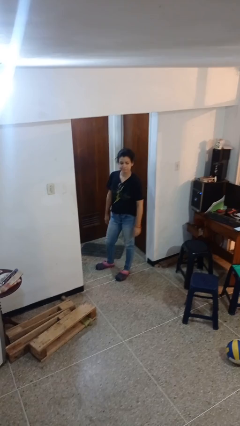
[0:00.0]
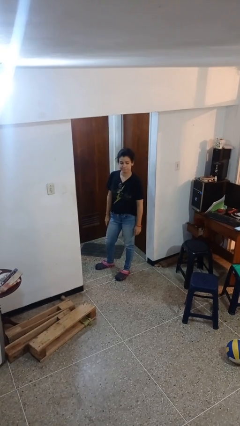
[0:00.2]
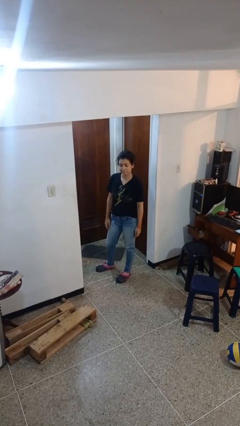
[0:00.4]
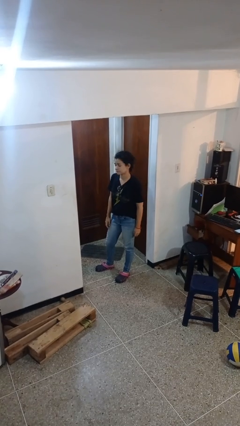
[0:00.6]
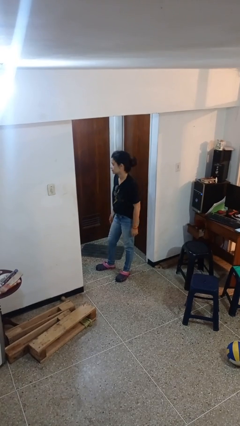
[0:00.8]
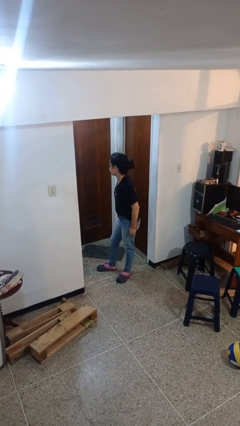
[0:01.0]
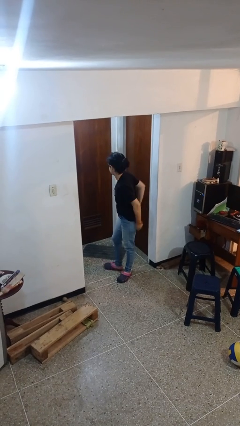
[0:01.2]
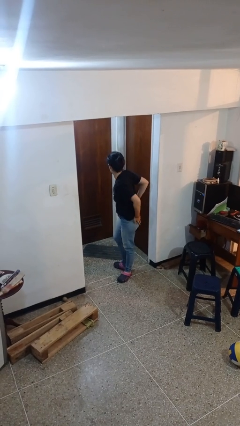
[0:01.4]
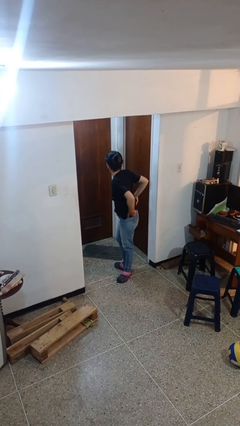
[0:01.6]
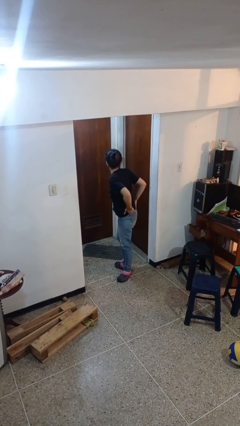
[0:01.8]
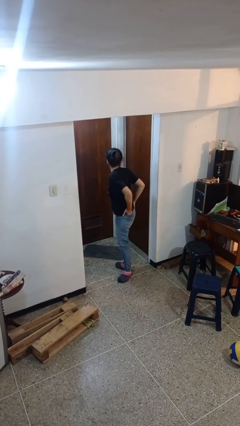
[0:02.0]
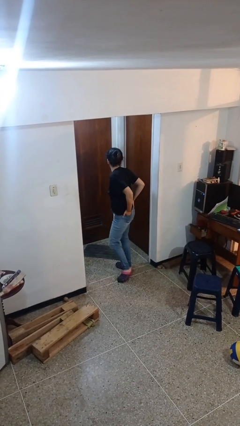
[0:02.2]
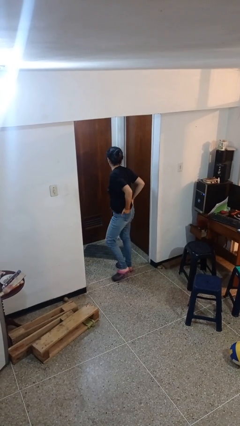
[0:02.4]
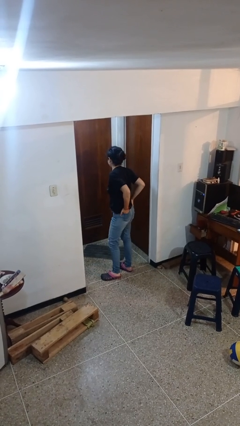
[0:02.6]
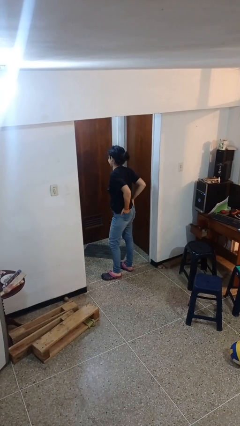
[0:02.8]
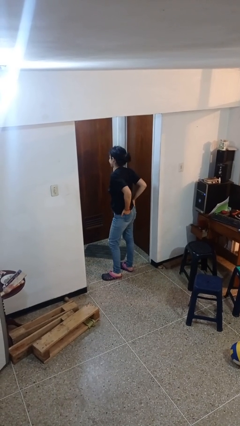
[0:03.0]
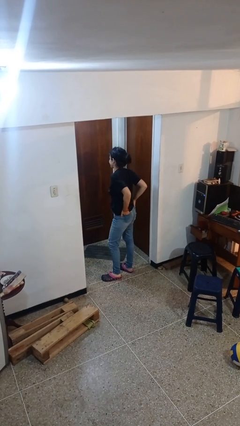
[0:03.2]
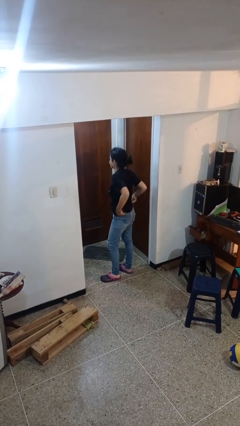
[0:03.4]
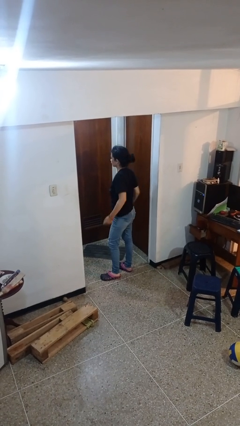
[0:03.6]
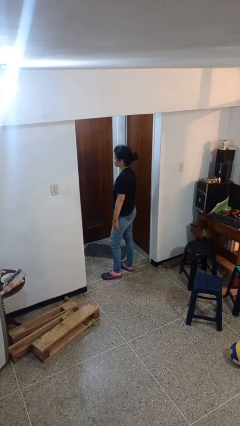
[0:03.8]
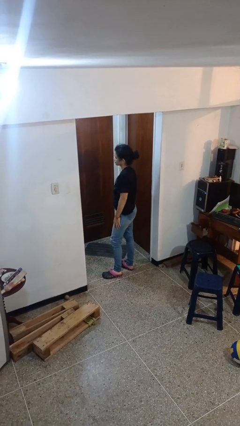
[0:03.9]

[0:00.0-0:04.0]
person puts hands in back pockets

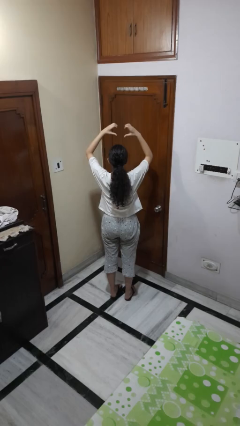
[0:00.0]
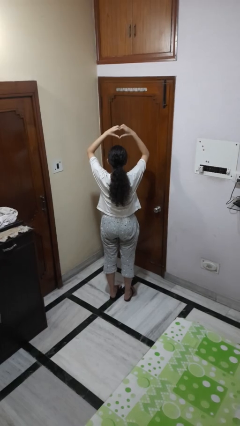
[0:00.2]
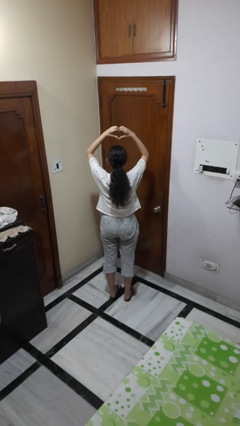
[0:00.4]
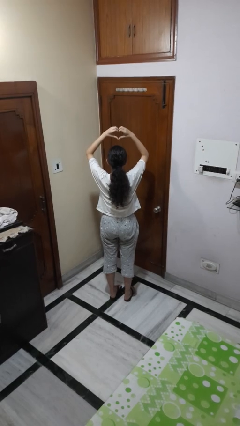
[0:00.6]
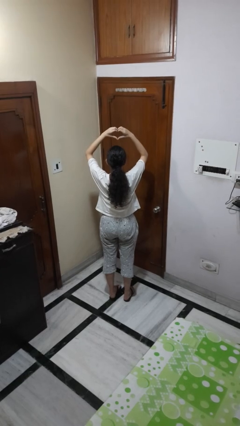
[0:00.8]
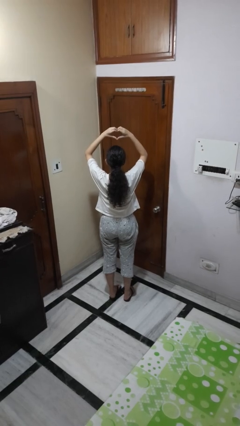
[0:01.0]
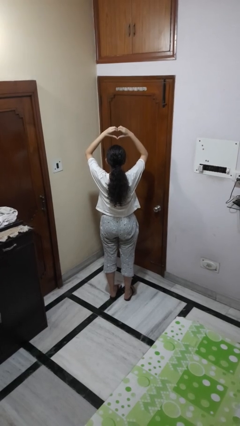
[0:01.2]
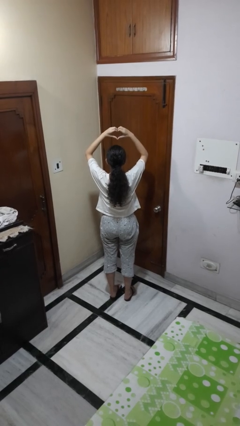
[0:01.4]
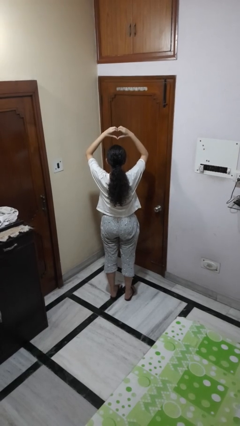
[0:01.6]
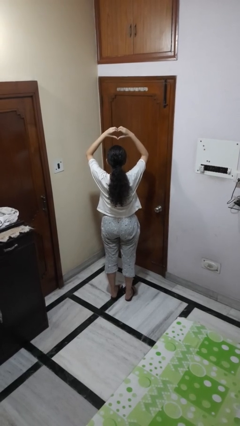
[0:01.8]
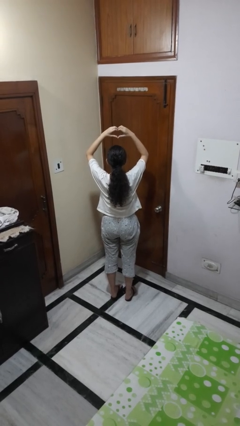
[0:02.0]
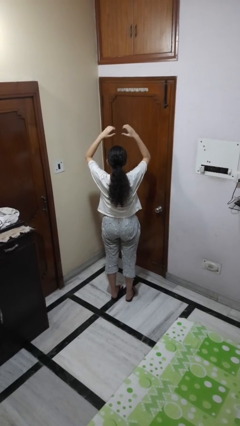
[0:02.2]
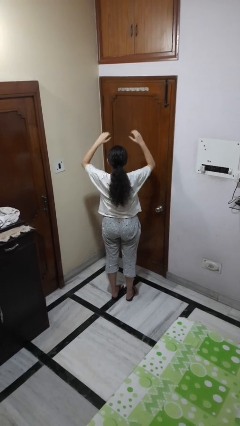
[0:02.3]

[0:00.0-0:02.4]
person gestures heart

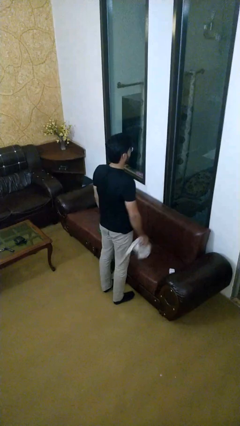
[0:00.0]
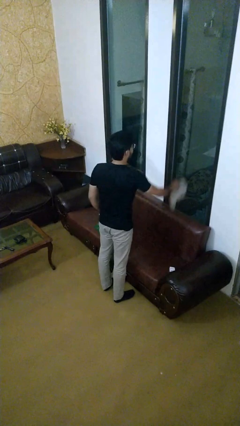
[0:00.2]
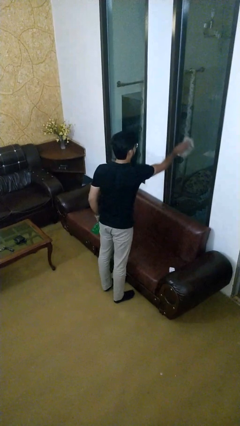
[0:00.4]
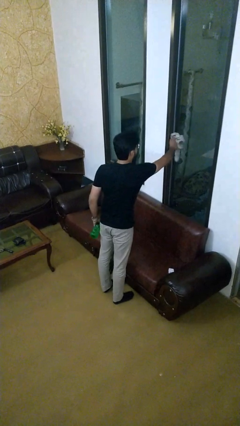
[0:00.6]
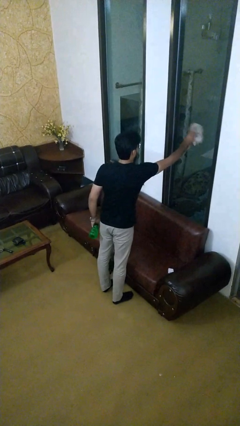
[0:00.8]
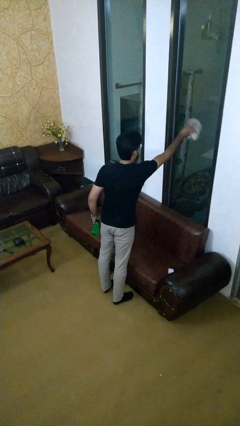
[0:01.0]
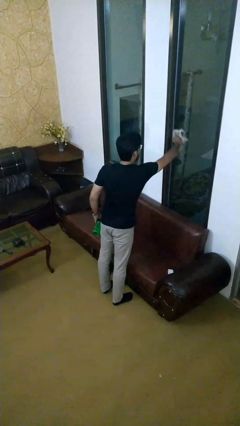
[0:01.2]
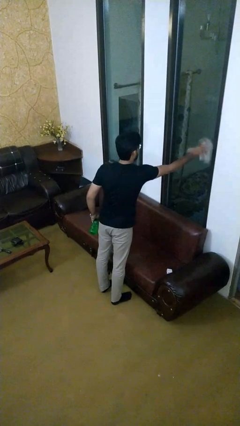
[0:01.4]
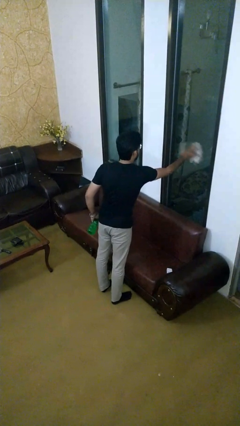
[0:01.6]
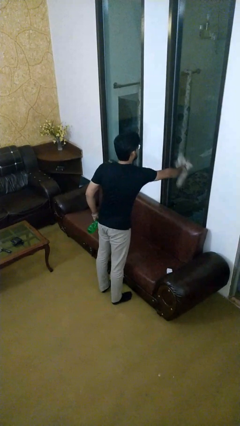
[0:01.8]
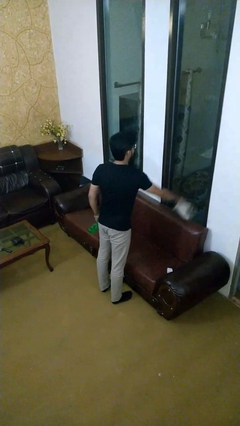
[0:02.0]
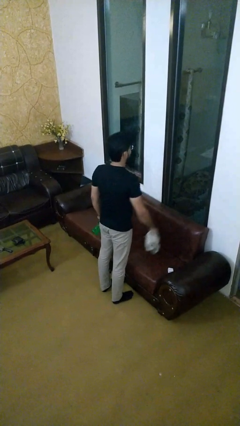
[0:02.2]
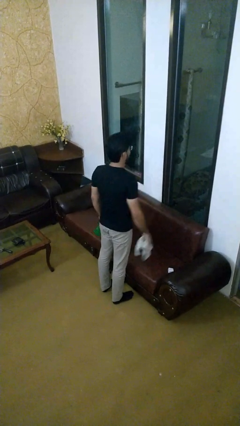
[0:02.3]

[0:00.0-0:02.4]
person washes window

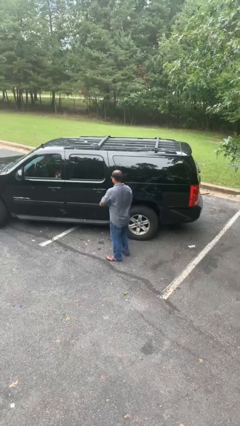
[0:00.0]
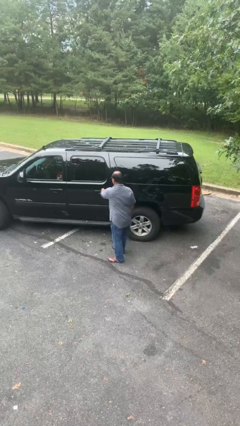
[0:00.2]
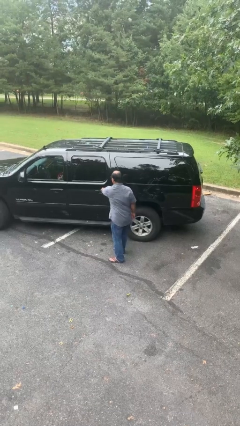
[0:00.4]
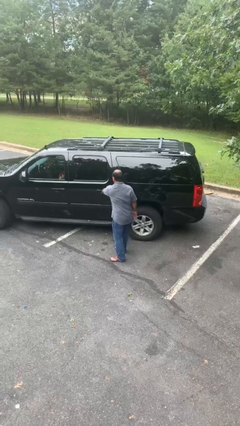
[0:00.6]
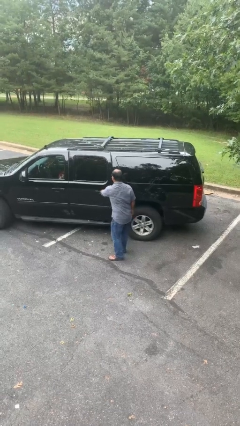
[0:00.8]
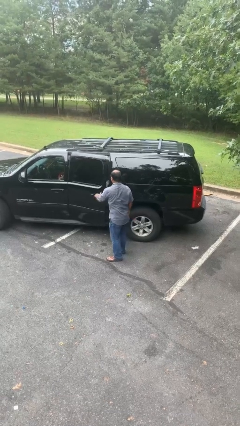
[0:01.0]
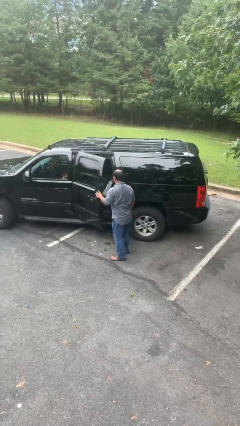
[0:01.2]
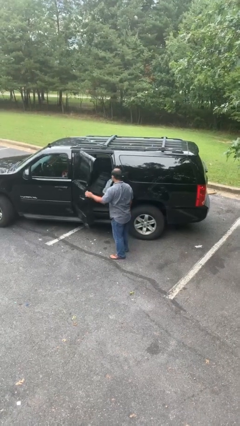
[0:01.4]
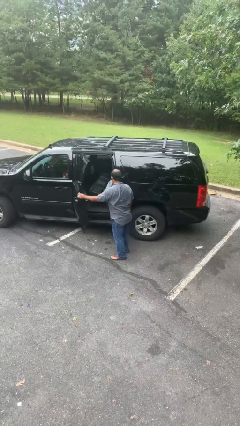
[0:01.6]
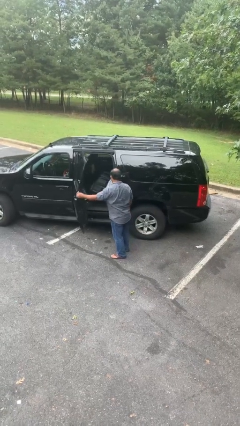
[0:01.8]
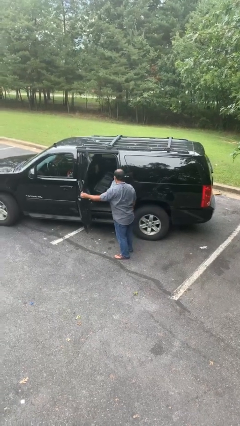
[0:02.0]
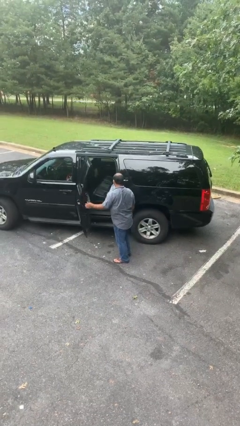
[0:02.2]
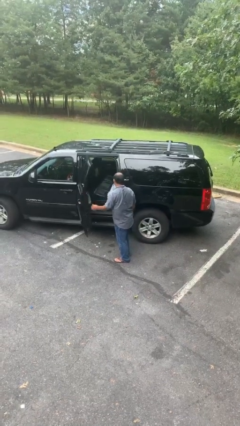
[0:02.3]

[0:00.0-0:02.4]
person opens car door

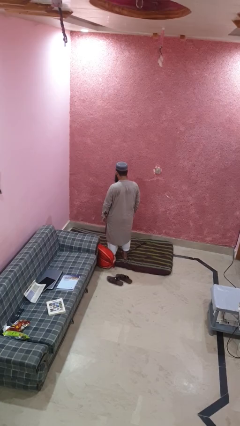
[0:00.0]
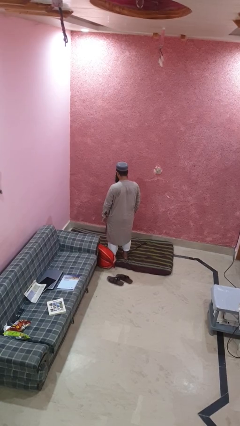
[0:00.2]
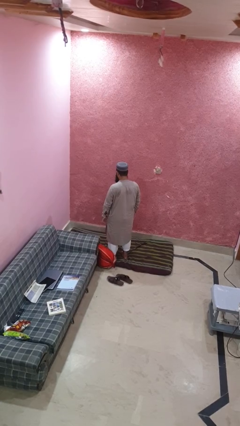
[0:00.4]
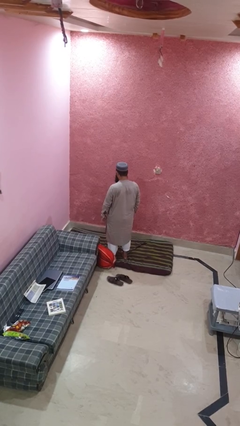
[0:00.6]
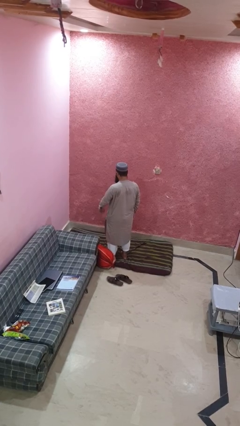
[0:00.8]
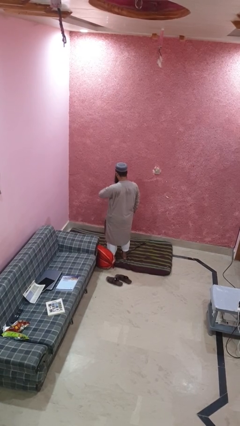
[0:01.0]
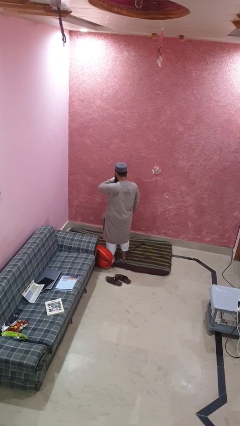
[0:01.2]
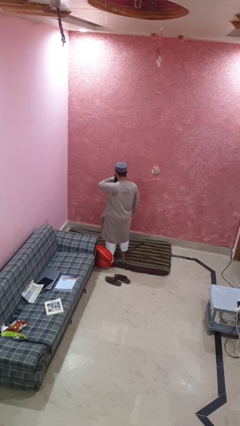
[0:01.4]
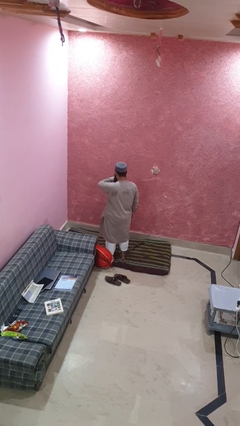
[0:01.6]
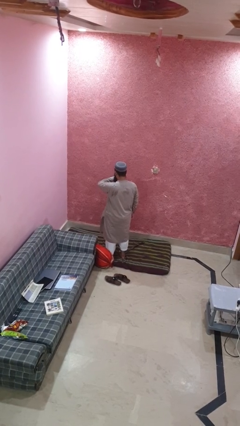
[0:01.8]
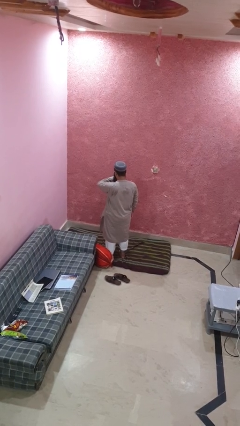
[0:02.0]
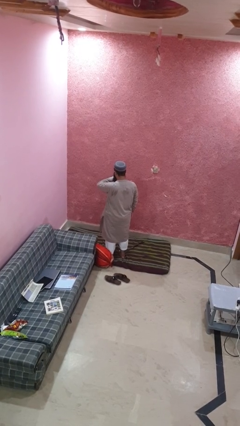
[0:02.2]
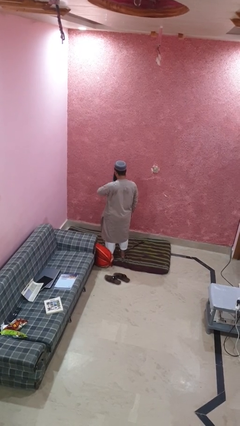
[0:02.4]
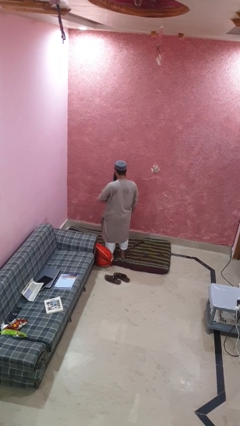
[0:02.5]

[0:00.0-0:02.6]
person looks at wristwatch

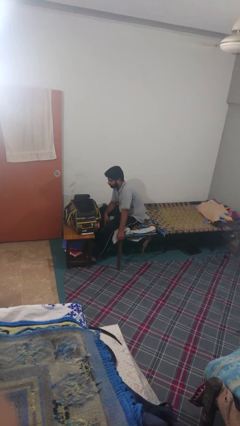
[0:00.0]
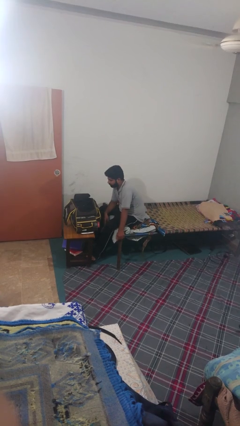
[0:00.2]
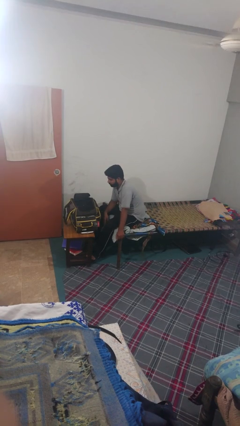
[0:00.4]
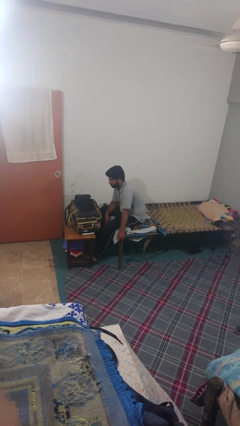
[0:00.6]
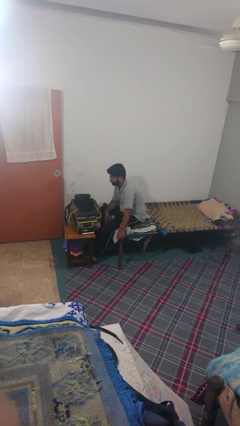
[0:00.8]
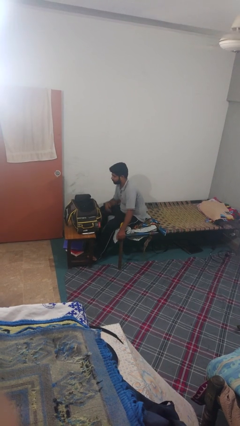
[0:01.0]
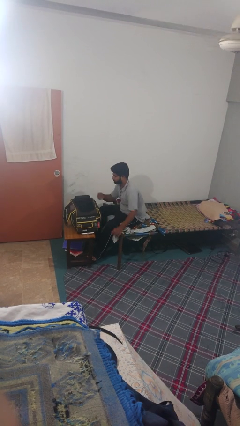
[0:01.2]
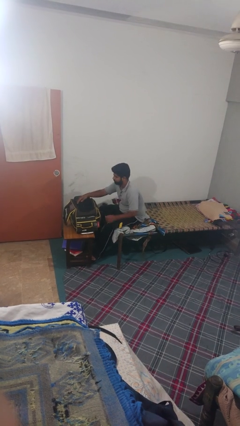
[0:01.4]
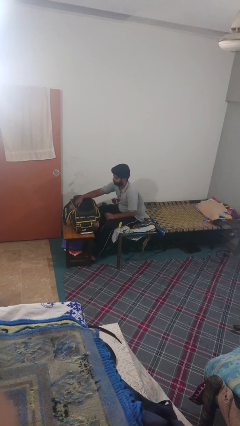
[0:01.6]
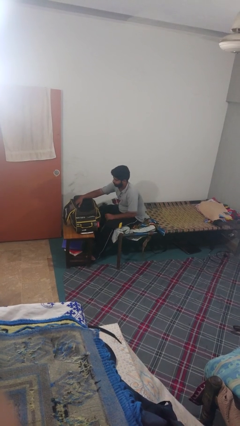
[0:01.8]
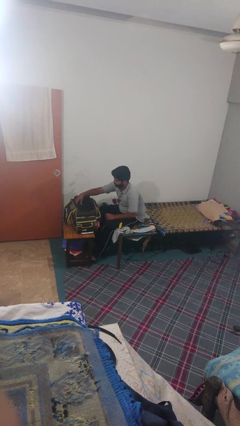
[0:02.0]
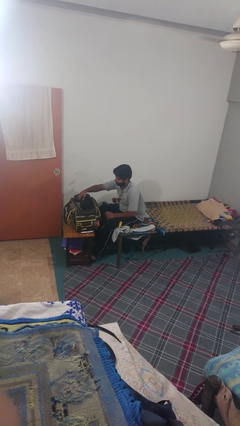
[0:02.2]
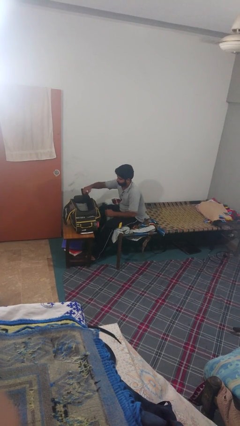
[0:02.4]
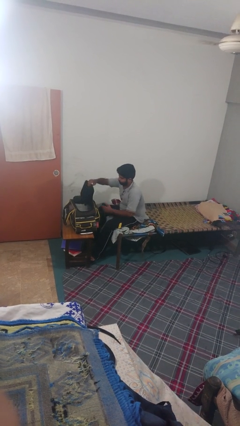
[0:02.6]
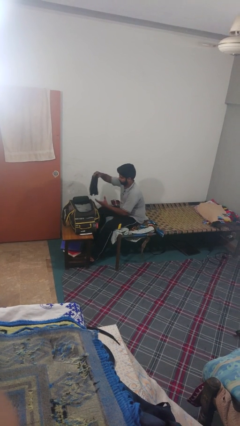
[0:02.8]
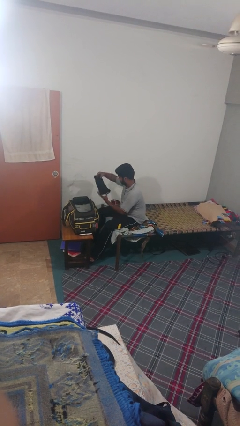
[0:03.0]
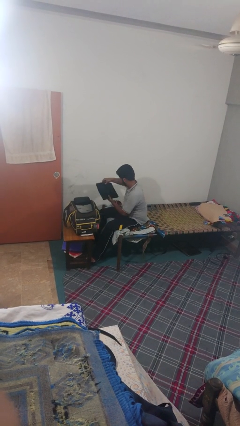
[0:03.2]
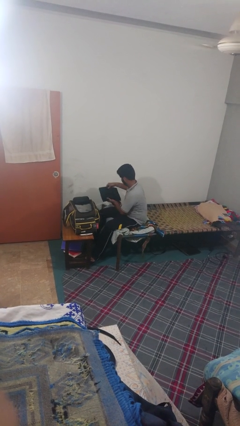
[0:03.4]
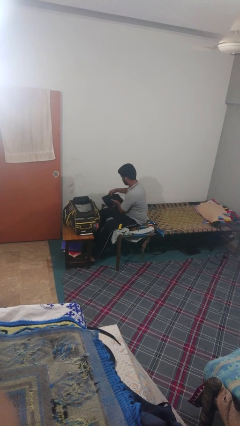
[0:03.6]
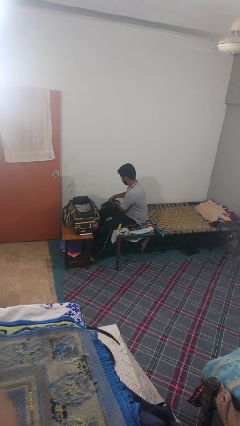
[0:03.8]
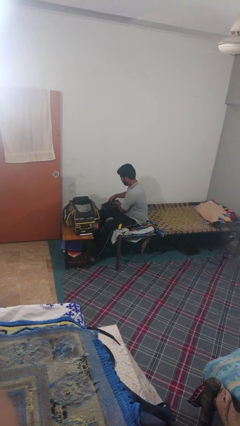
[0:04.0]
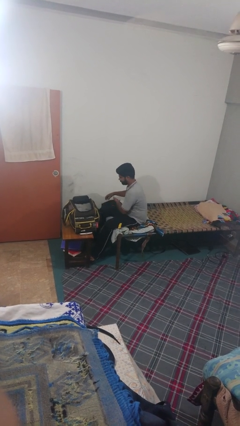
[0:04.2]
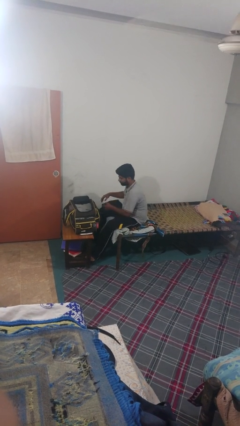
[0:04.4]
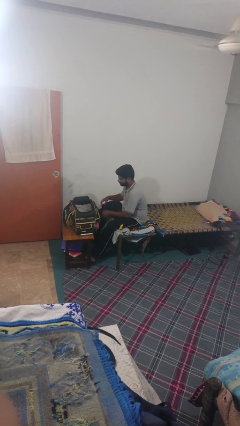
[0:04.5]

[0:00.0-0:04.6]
person unloads clothes from suitcase
